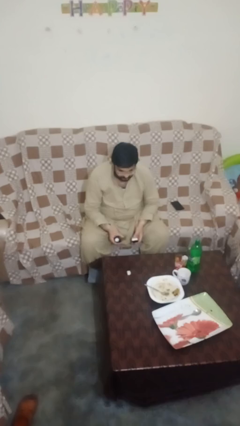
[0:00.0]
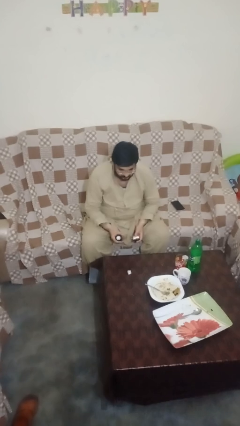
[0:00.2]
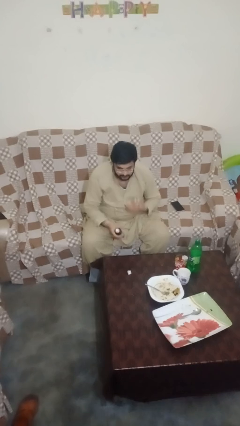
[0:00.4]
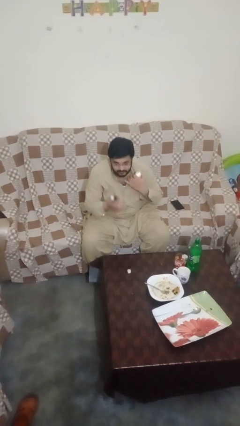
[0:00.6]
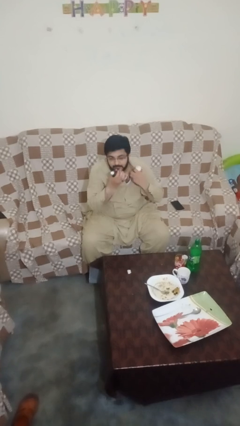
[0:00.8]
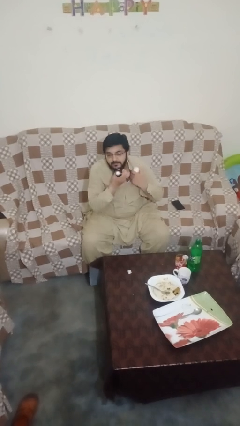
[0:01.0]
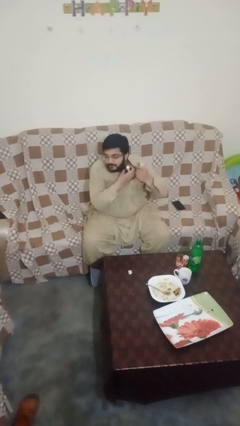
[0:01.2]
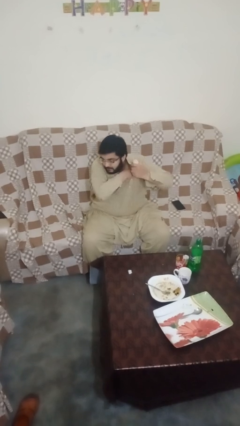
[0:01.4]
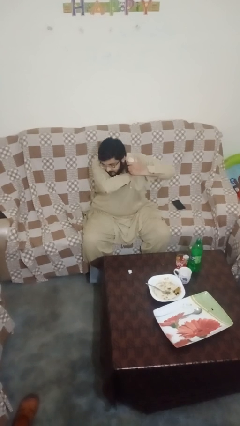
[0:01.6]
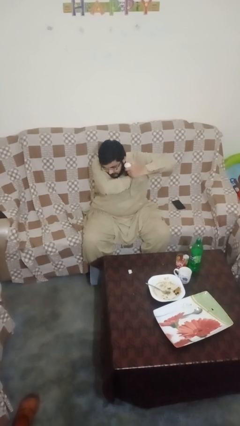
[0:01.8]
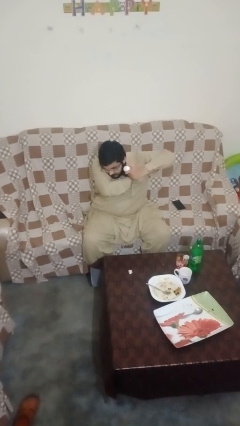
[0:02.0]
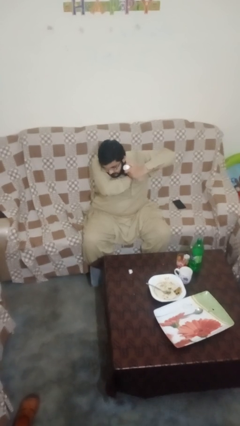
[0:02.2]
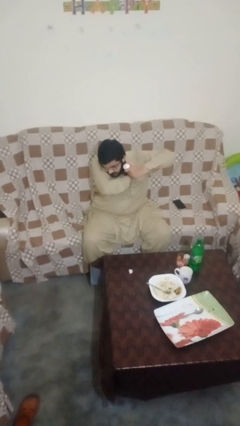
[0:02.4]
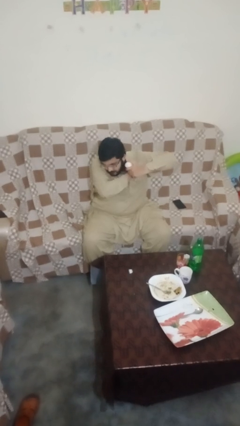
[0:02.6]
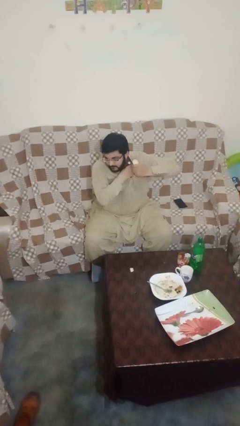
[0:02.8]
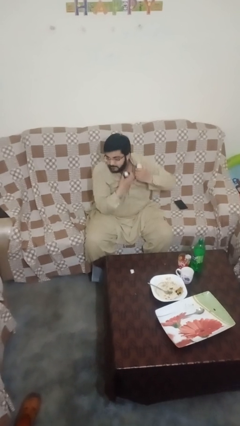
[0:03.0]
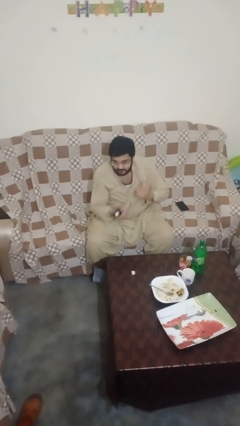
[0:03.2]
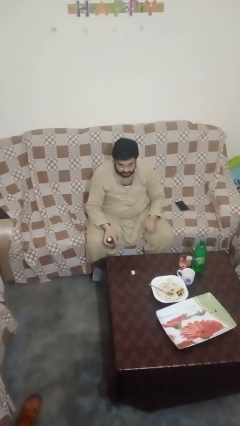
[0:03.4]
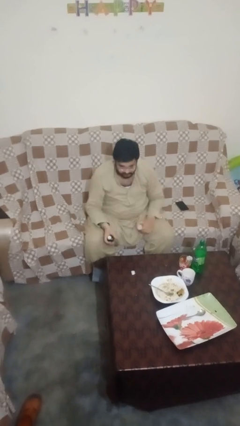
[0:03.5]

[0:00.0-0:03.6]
person applies deodorant

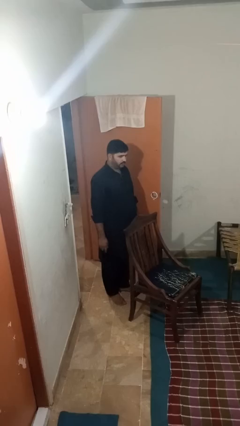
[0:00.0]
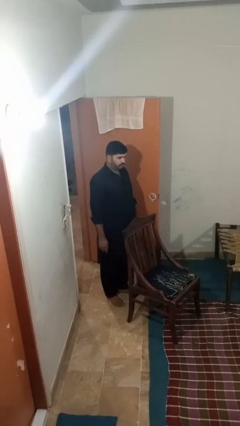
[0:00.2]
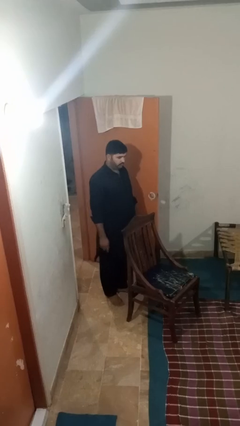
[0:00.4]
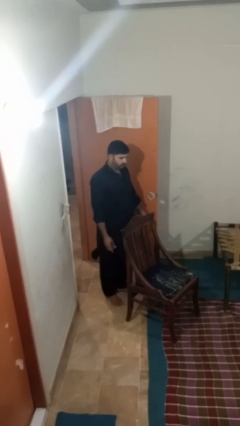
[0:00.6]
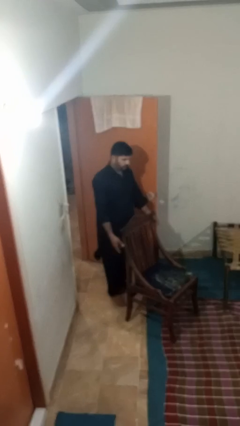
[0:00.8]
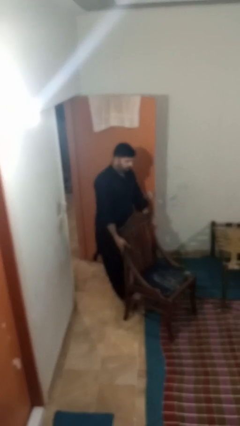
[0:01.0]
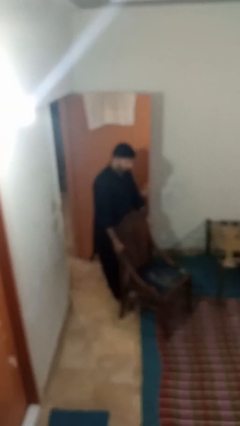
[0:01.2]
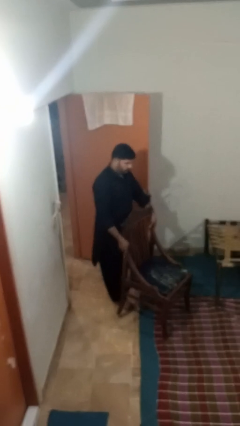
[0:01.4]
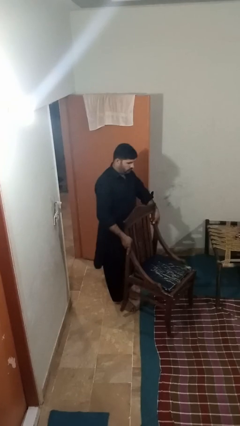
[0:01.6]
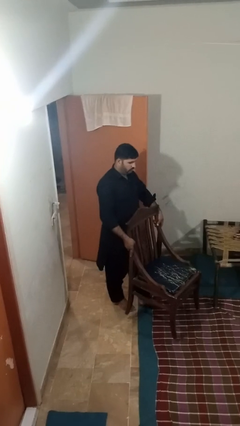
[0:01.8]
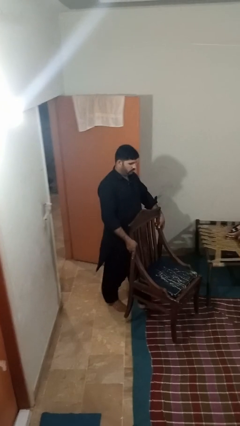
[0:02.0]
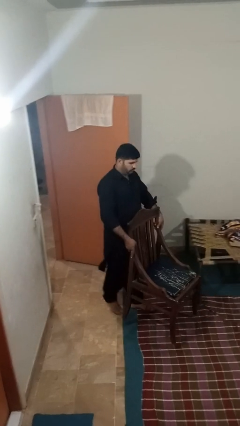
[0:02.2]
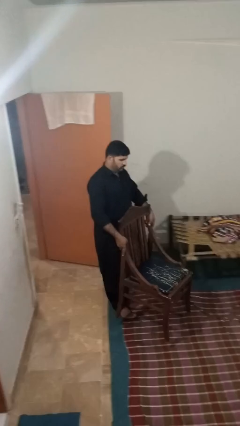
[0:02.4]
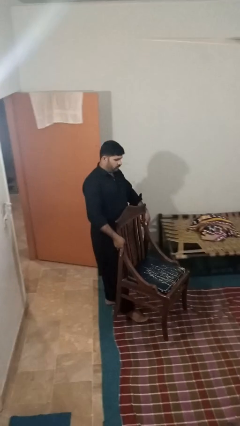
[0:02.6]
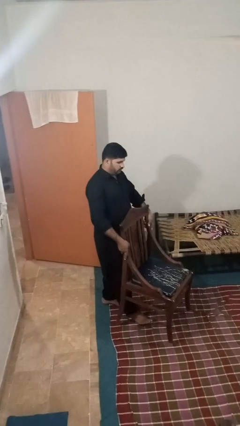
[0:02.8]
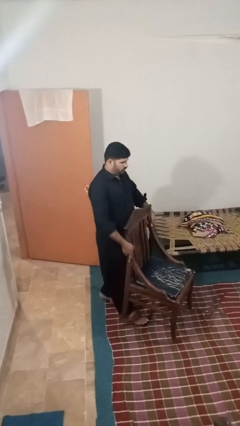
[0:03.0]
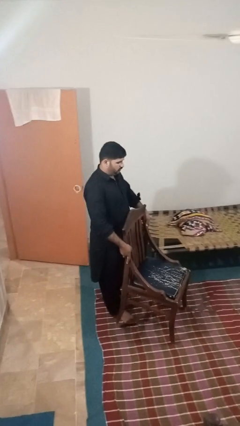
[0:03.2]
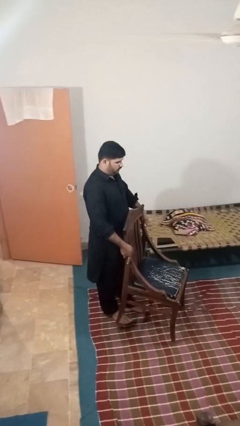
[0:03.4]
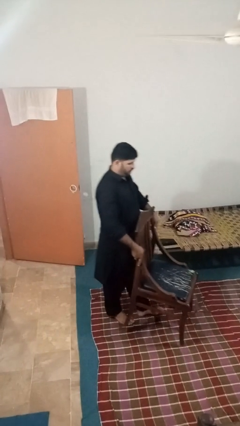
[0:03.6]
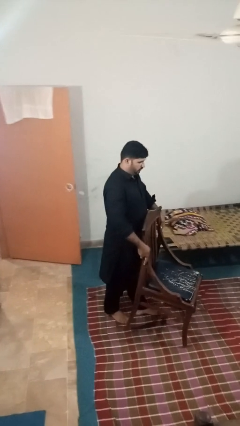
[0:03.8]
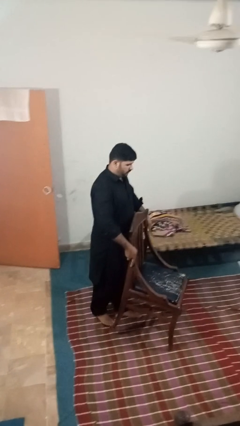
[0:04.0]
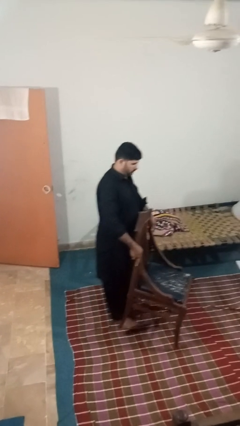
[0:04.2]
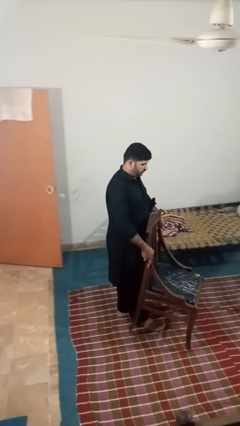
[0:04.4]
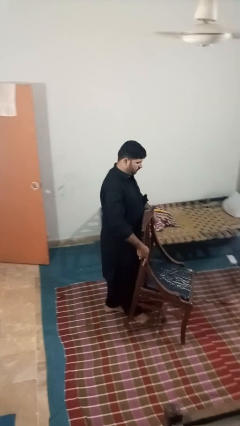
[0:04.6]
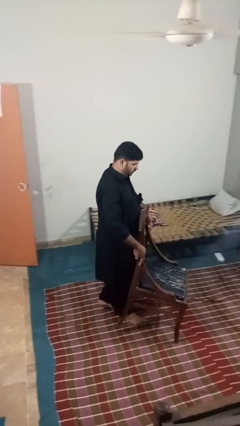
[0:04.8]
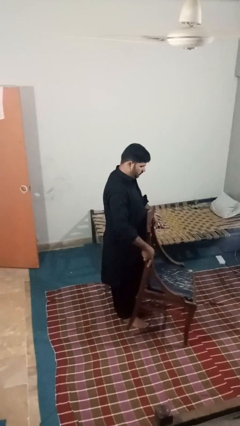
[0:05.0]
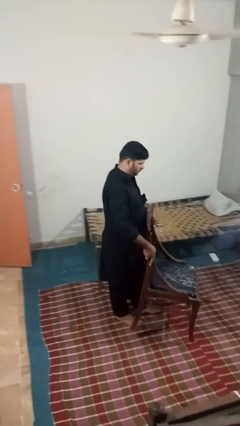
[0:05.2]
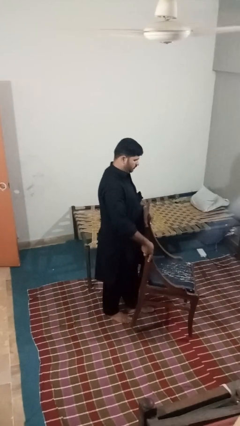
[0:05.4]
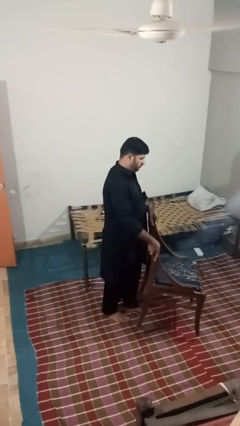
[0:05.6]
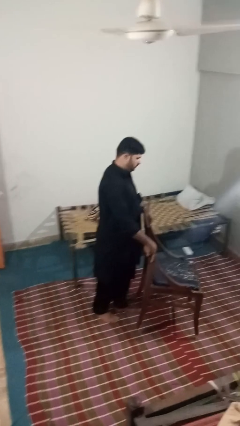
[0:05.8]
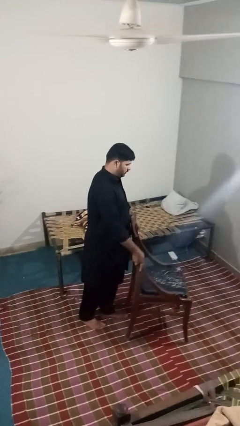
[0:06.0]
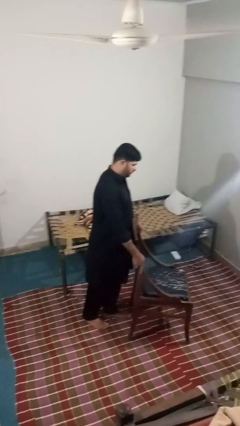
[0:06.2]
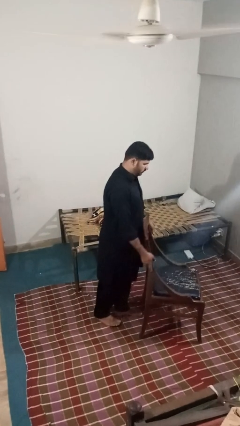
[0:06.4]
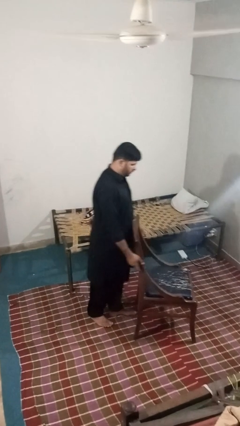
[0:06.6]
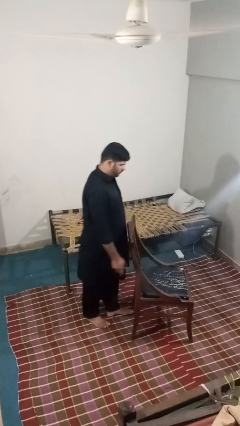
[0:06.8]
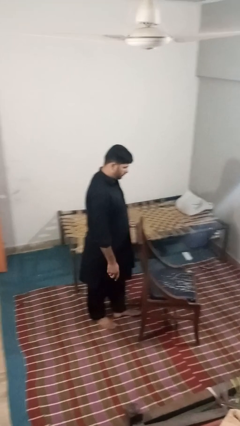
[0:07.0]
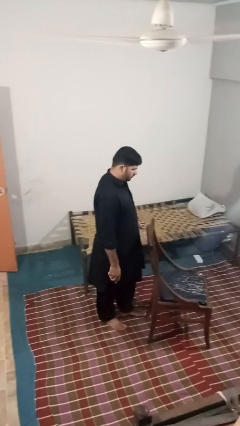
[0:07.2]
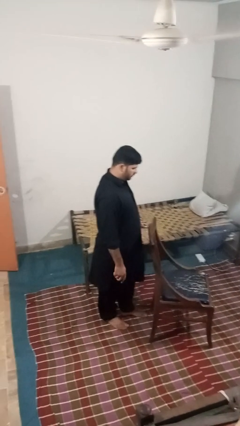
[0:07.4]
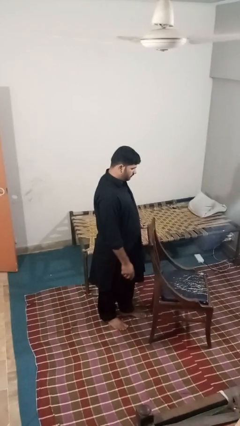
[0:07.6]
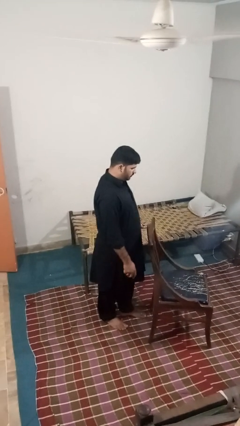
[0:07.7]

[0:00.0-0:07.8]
person carries furniture

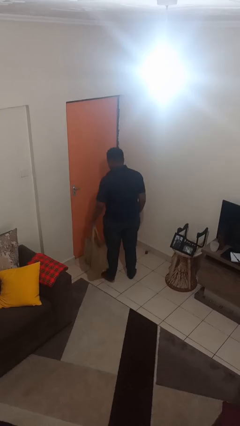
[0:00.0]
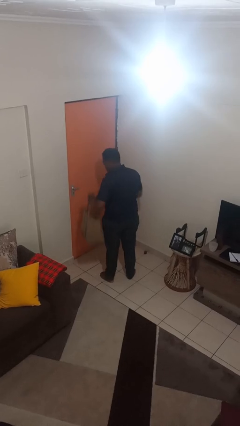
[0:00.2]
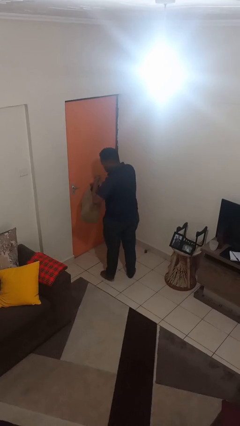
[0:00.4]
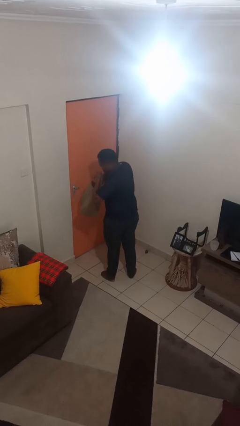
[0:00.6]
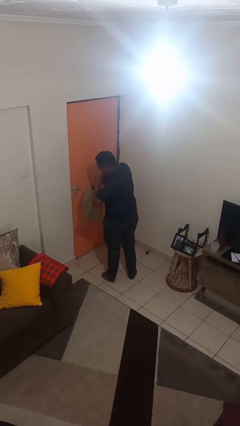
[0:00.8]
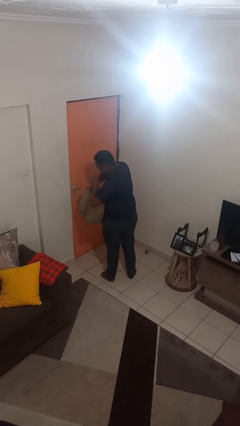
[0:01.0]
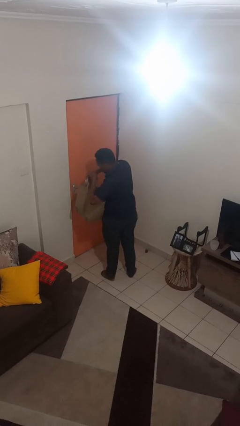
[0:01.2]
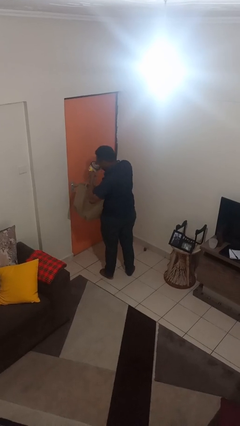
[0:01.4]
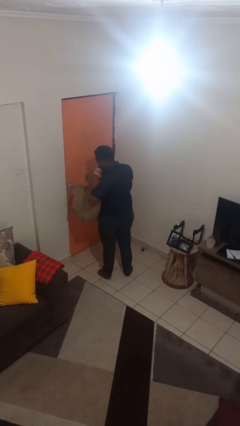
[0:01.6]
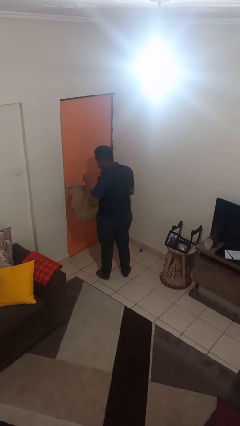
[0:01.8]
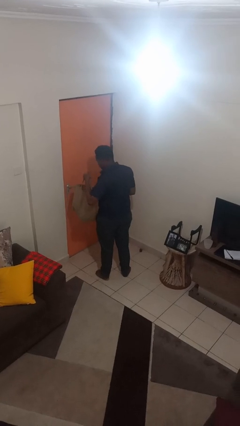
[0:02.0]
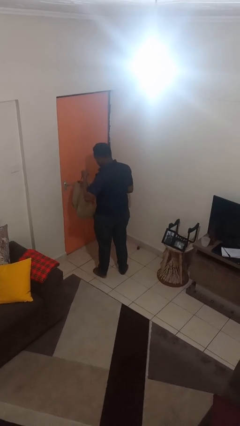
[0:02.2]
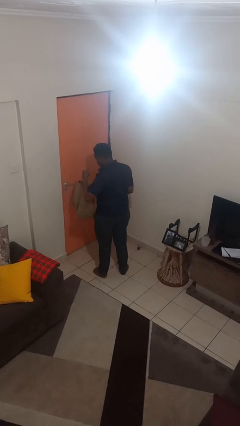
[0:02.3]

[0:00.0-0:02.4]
person takes object from bag

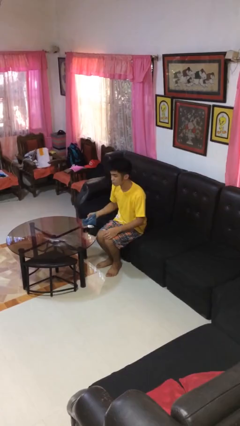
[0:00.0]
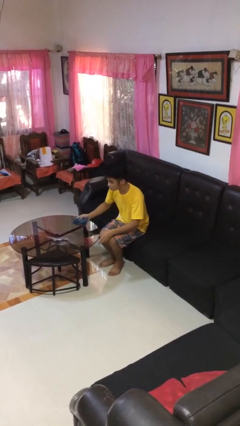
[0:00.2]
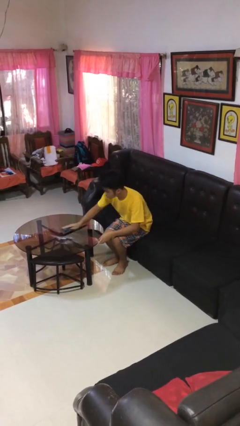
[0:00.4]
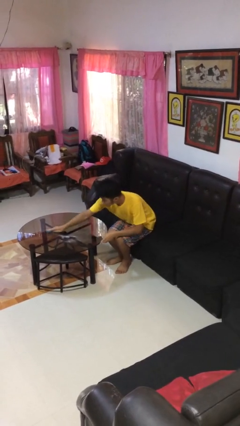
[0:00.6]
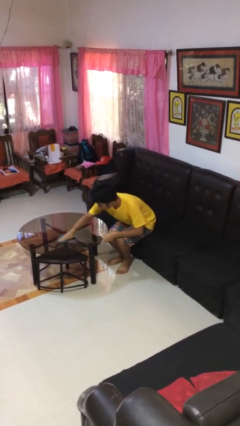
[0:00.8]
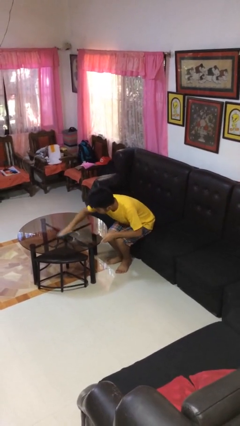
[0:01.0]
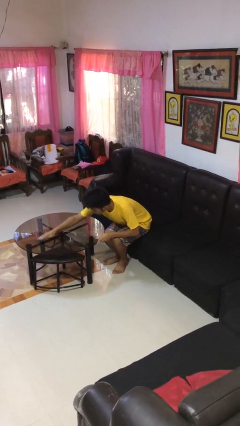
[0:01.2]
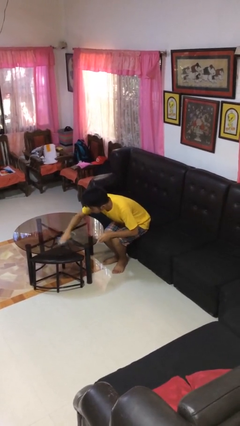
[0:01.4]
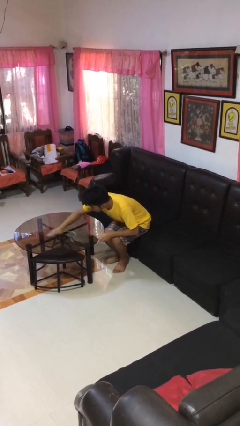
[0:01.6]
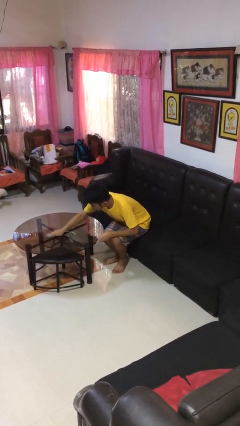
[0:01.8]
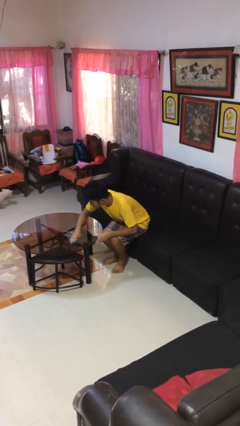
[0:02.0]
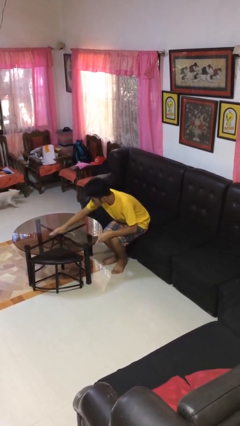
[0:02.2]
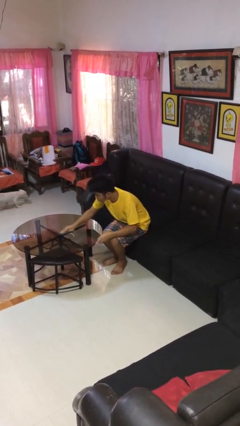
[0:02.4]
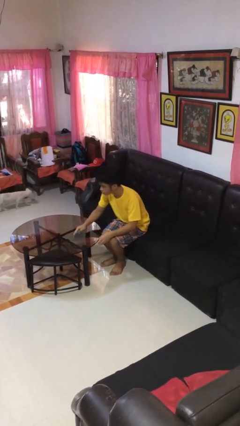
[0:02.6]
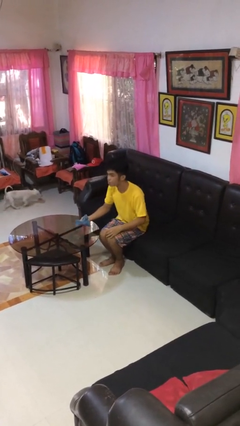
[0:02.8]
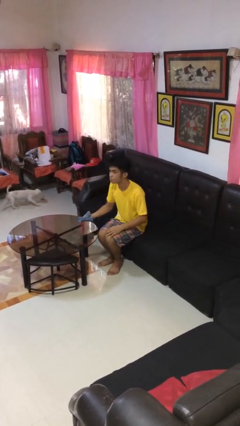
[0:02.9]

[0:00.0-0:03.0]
person cleans table with rag

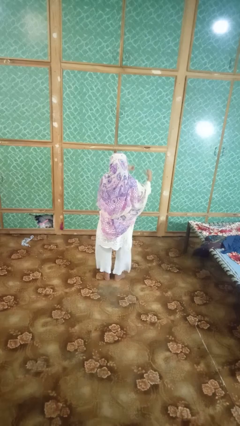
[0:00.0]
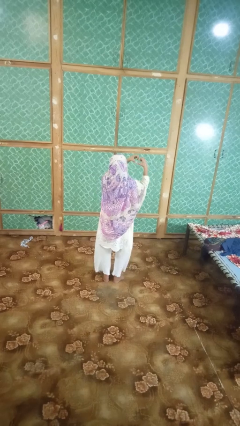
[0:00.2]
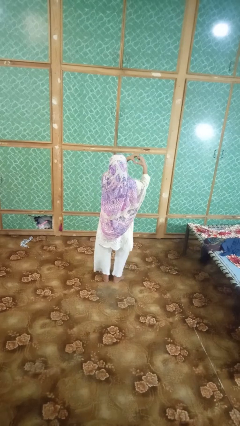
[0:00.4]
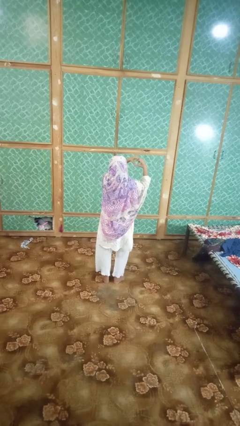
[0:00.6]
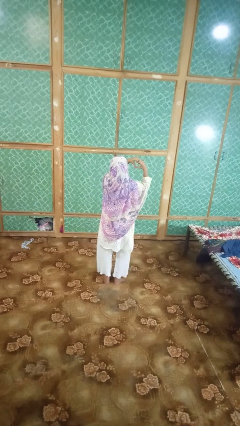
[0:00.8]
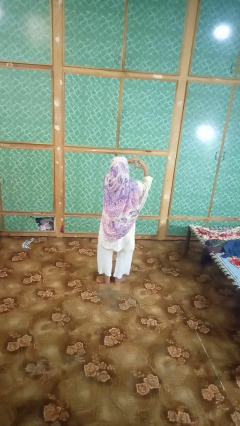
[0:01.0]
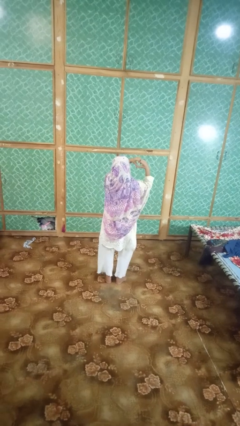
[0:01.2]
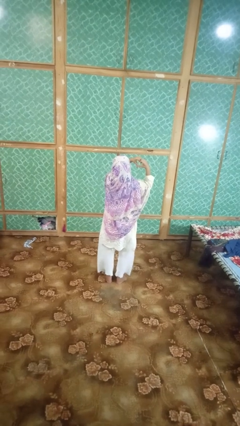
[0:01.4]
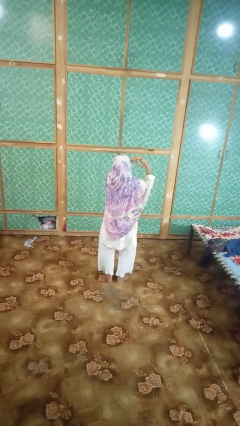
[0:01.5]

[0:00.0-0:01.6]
person gestures heart
